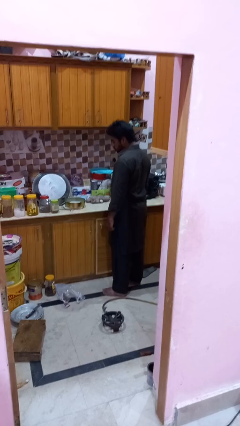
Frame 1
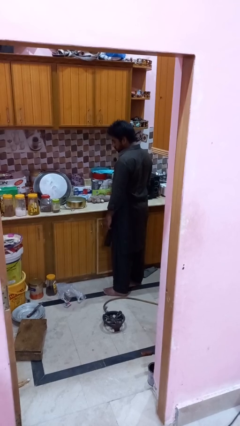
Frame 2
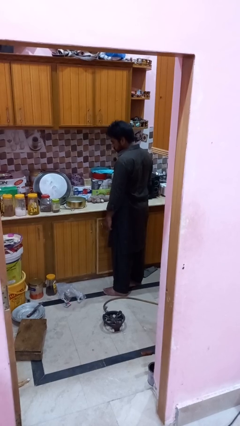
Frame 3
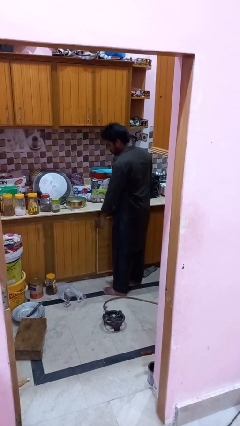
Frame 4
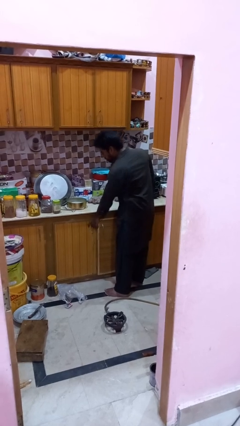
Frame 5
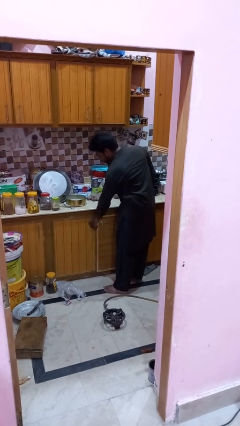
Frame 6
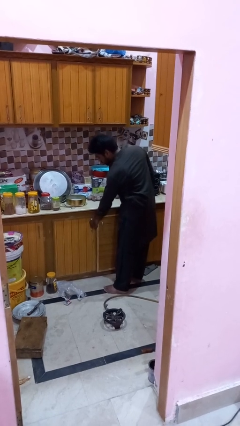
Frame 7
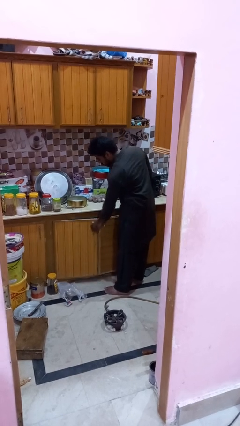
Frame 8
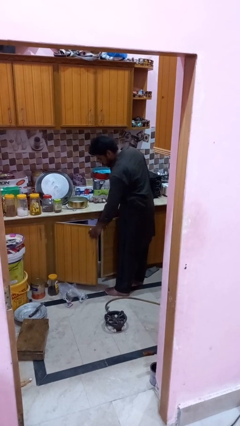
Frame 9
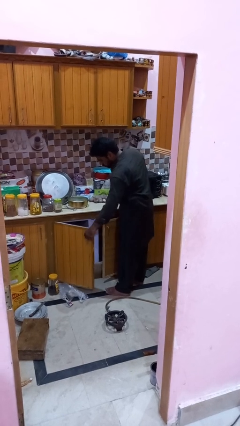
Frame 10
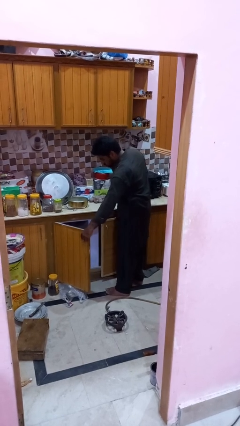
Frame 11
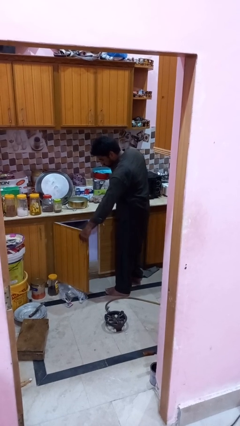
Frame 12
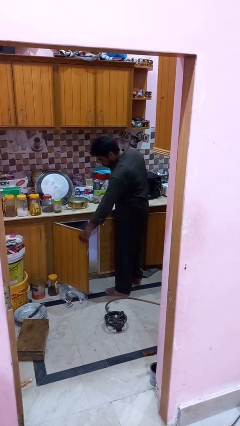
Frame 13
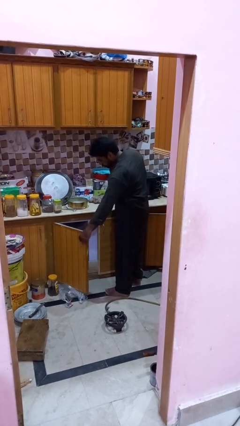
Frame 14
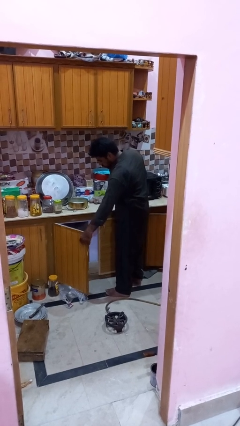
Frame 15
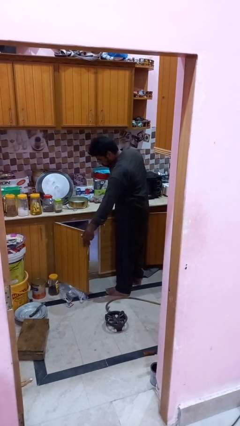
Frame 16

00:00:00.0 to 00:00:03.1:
person opens cabinet

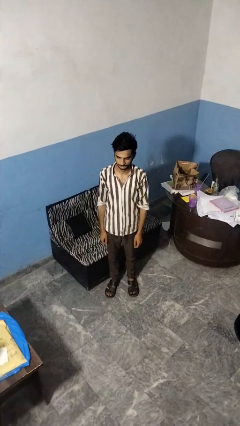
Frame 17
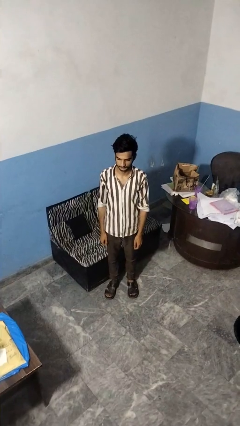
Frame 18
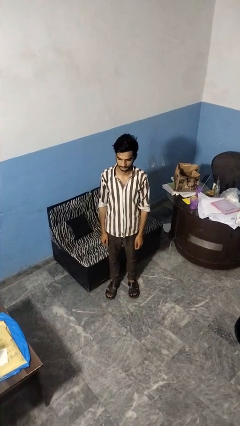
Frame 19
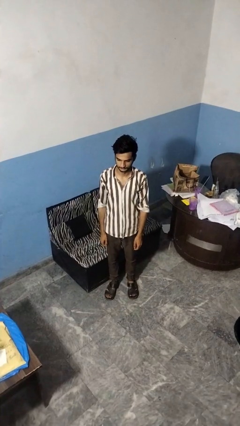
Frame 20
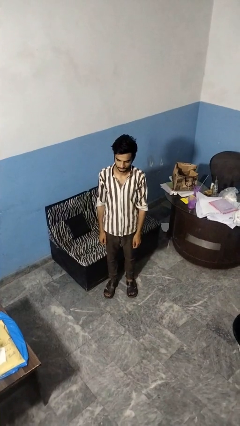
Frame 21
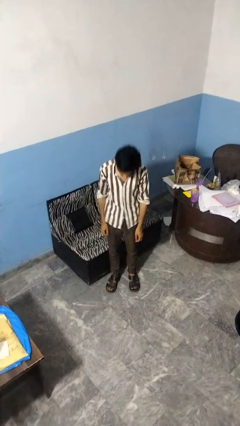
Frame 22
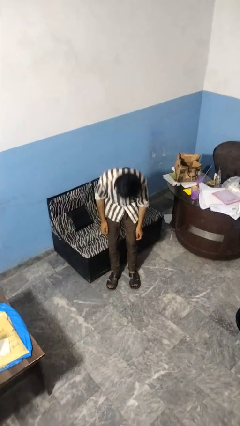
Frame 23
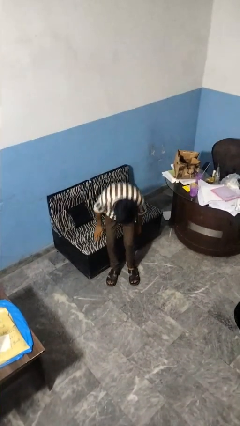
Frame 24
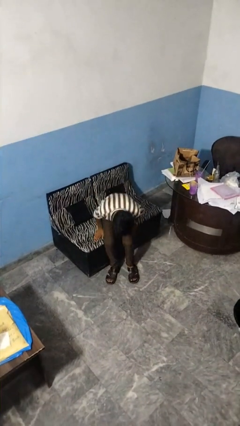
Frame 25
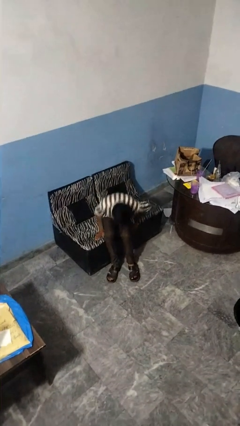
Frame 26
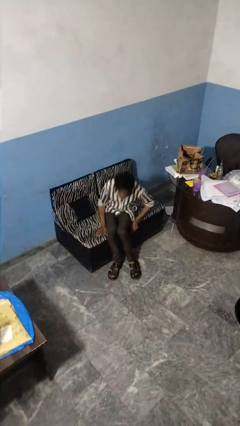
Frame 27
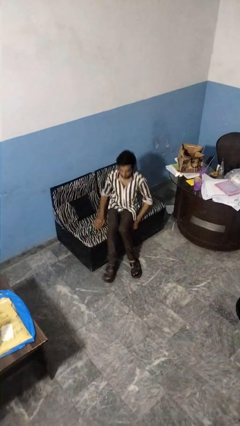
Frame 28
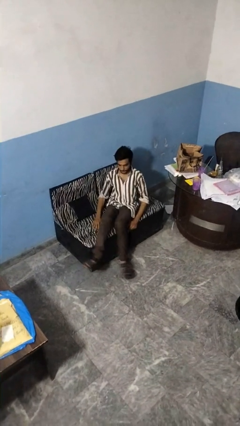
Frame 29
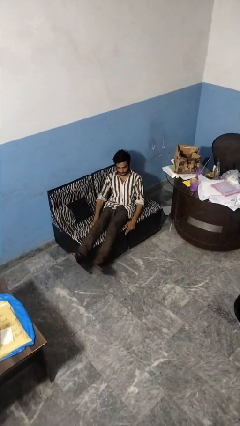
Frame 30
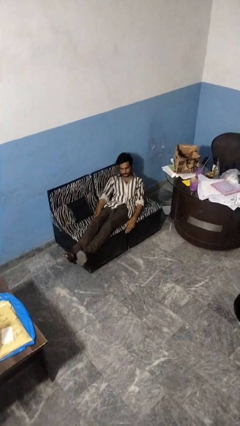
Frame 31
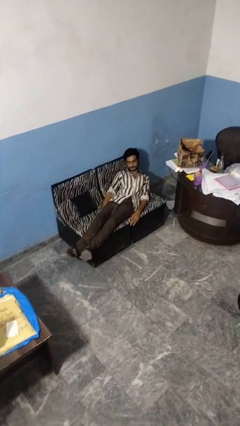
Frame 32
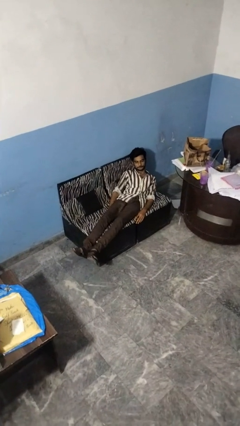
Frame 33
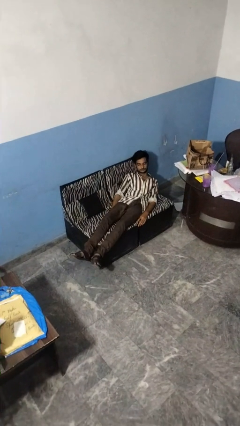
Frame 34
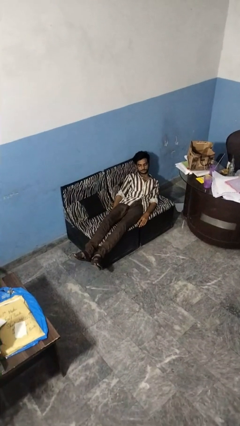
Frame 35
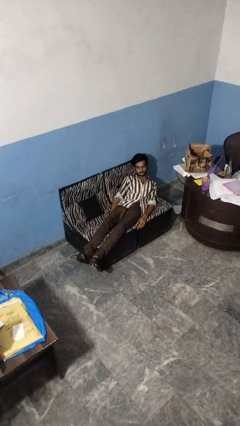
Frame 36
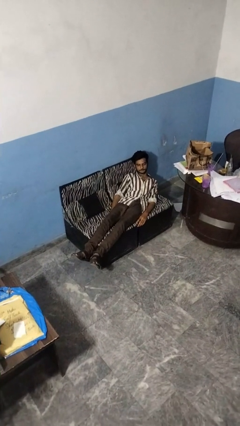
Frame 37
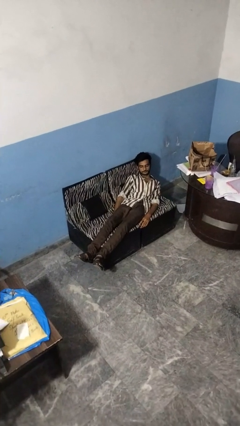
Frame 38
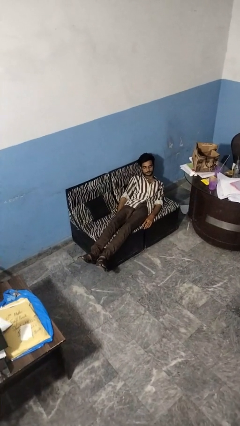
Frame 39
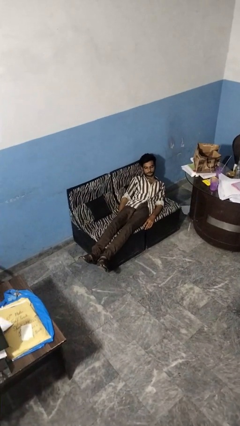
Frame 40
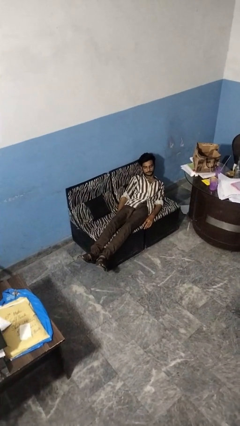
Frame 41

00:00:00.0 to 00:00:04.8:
person lies down on couch

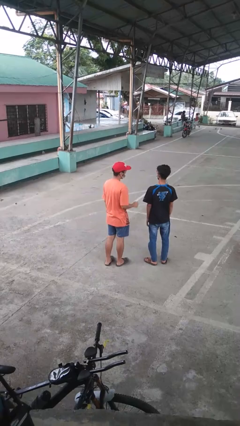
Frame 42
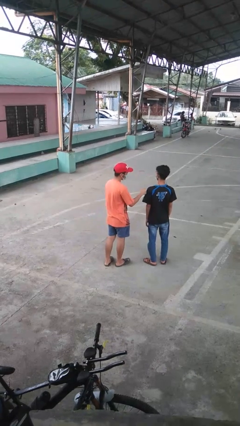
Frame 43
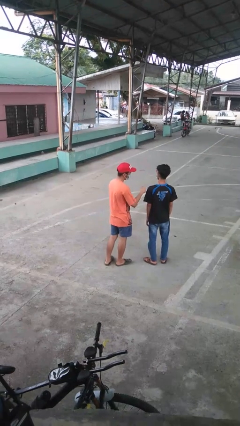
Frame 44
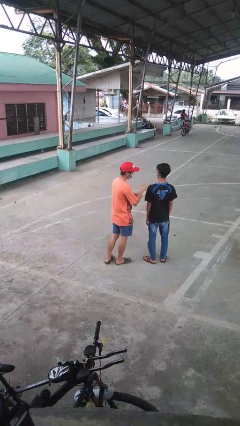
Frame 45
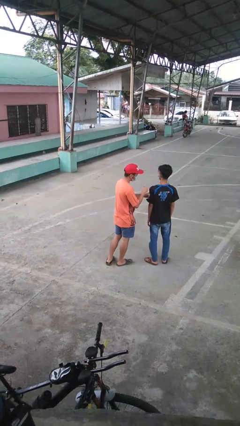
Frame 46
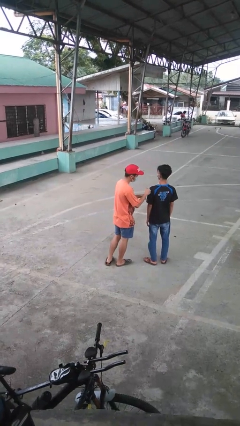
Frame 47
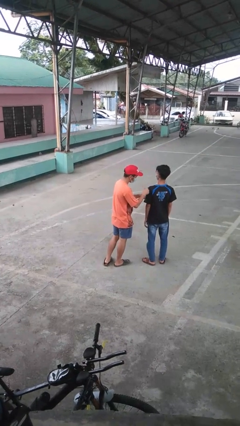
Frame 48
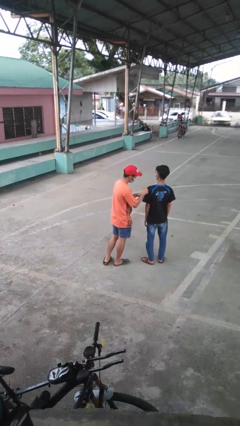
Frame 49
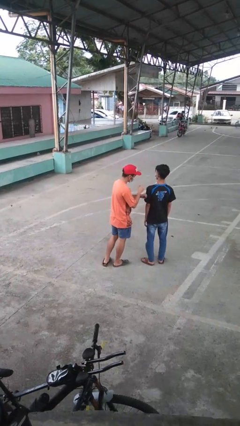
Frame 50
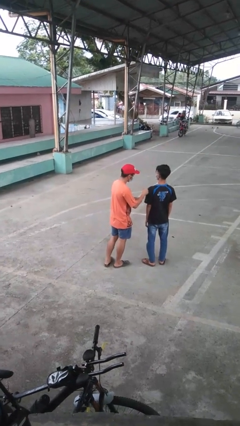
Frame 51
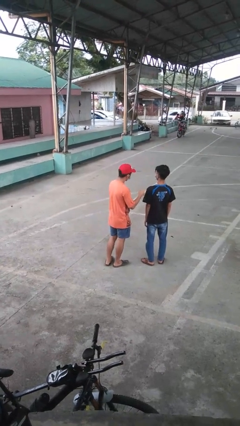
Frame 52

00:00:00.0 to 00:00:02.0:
person pounds shoulders of person

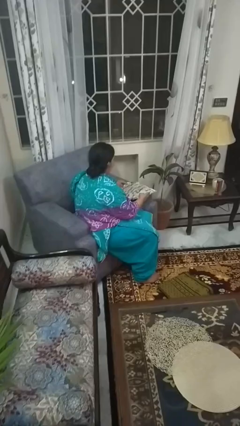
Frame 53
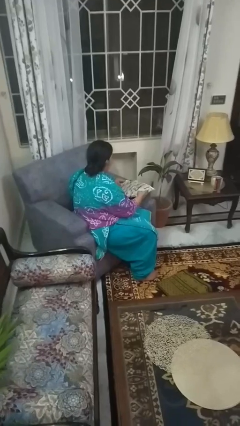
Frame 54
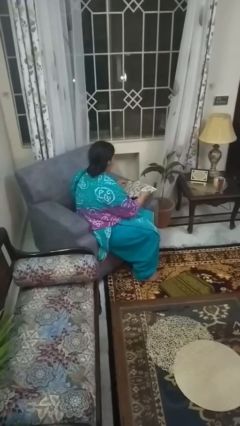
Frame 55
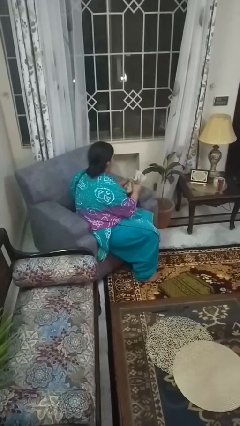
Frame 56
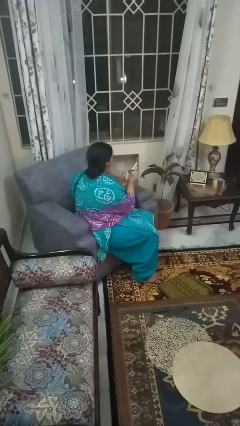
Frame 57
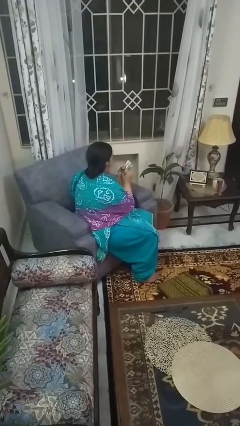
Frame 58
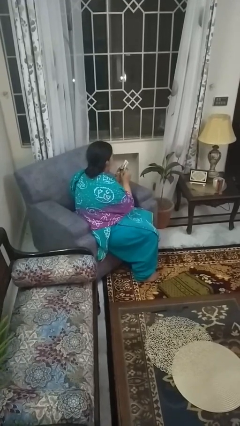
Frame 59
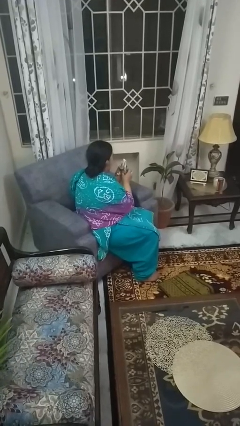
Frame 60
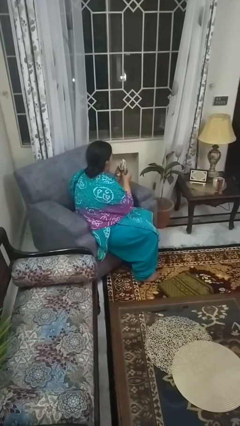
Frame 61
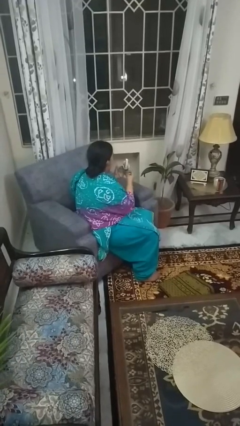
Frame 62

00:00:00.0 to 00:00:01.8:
person crumples paper

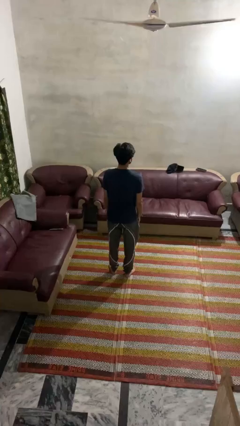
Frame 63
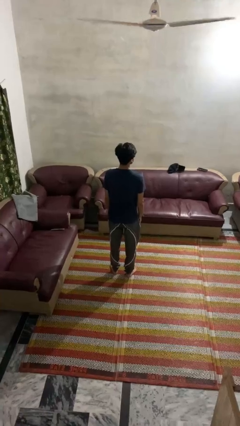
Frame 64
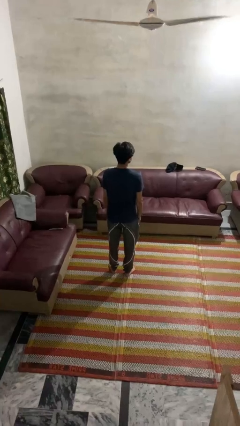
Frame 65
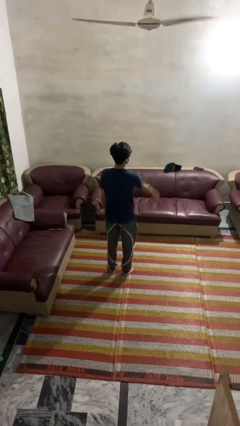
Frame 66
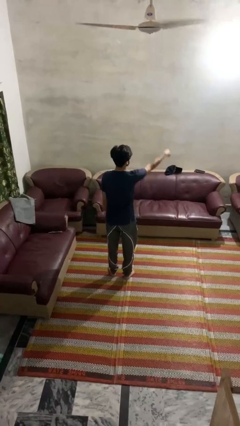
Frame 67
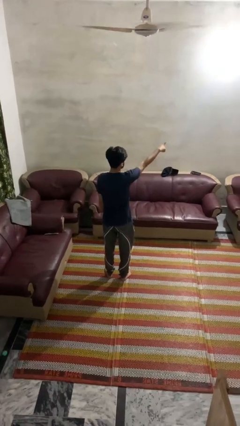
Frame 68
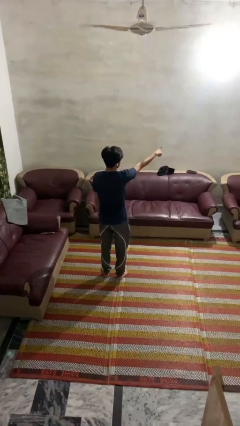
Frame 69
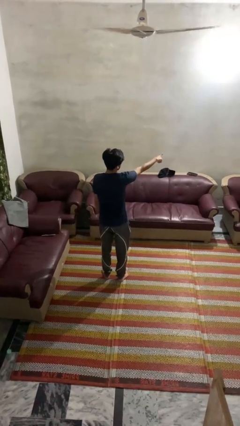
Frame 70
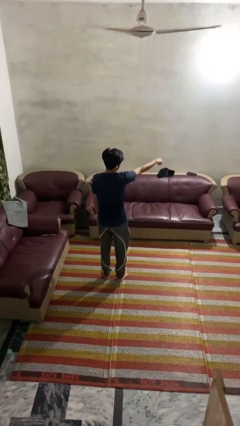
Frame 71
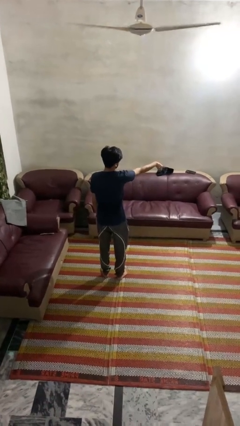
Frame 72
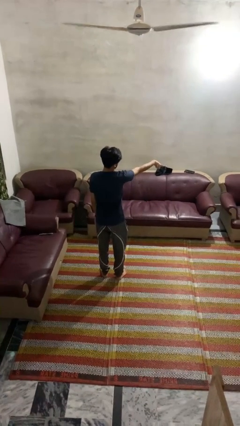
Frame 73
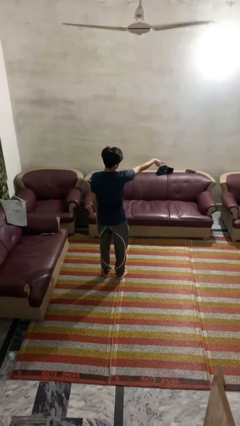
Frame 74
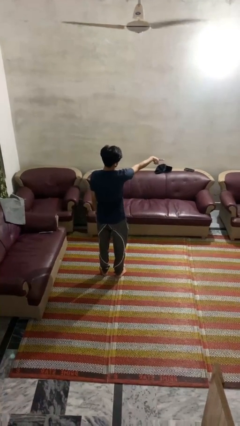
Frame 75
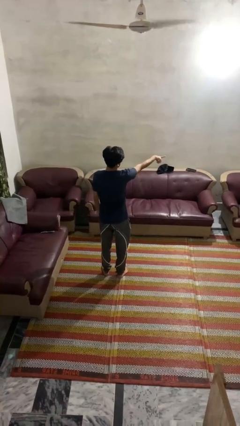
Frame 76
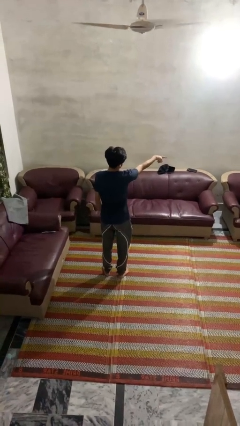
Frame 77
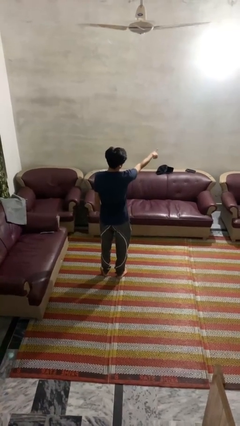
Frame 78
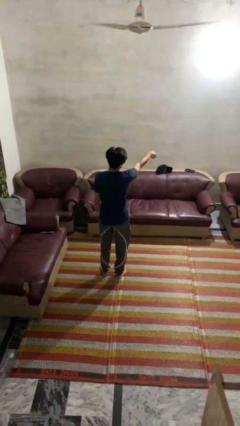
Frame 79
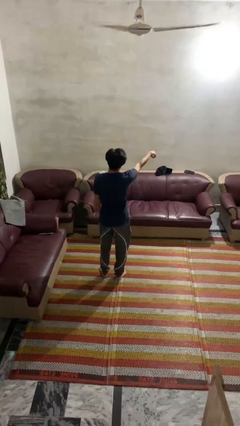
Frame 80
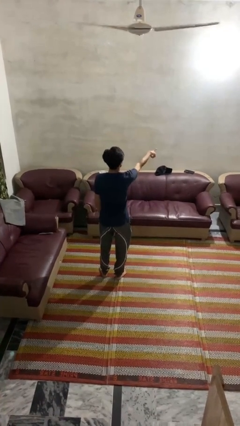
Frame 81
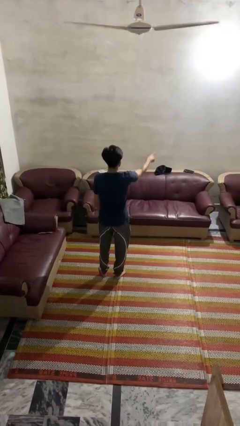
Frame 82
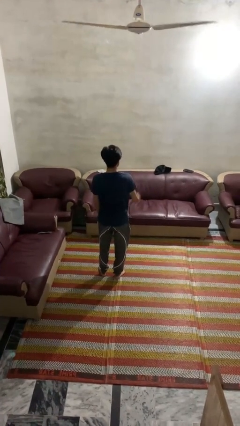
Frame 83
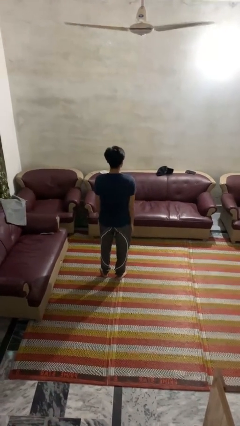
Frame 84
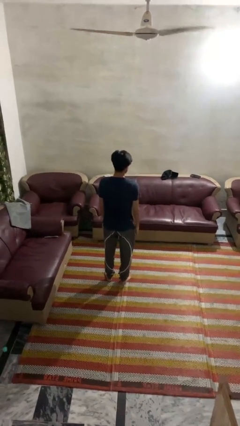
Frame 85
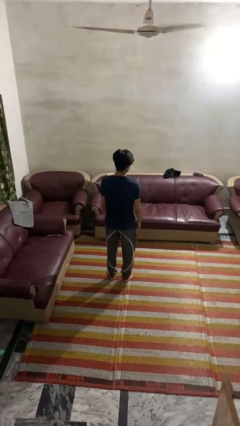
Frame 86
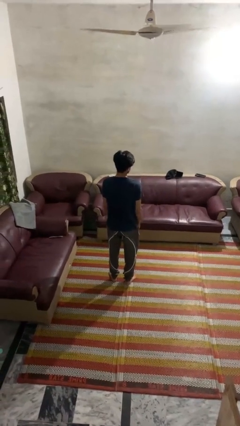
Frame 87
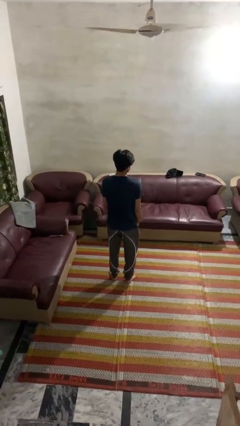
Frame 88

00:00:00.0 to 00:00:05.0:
person points at person

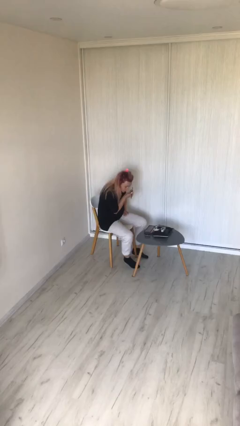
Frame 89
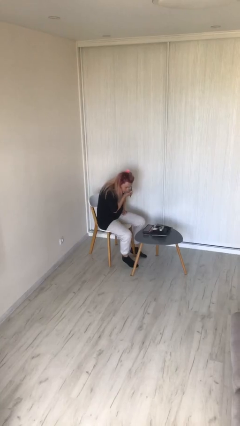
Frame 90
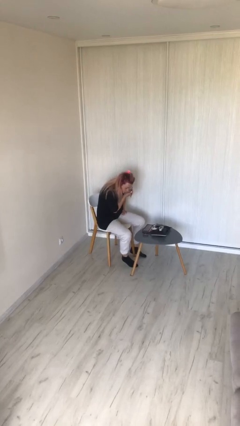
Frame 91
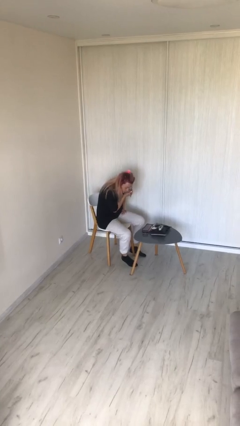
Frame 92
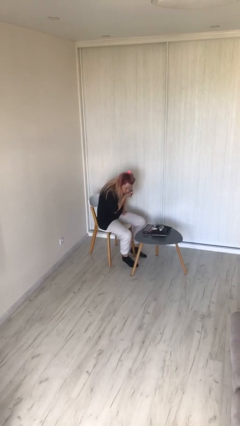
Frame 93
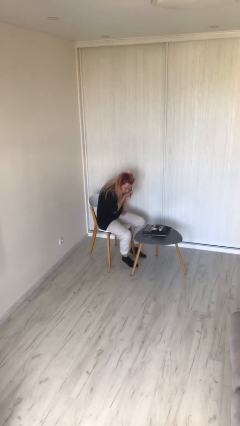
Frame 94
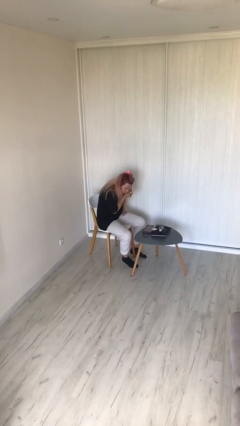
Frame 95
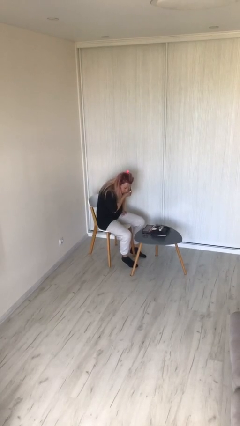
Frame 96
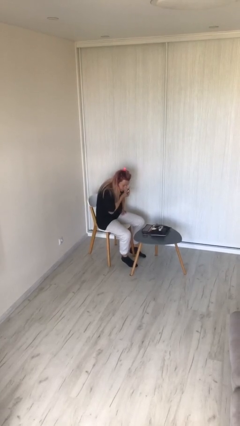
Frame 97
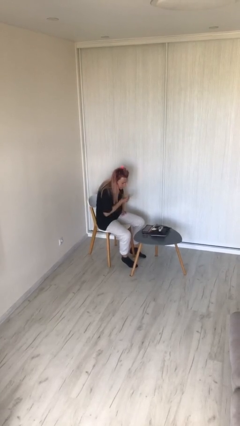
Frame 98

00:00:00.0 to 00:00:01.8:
person applies eye makeup
